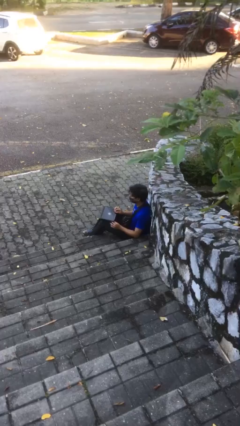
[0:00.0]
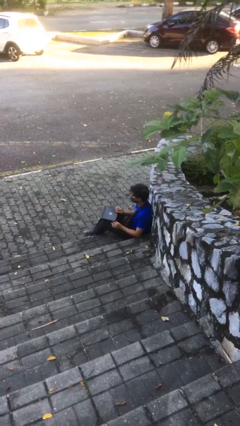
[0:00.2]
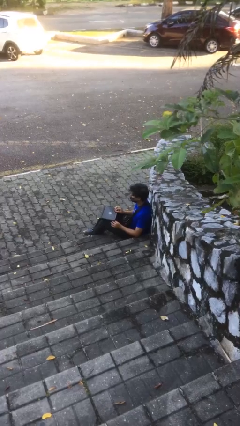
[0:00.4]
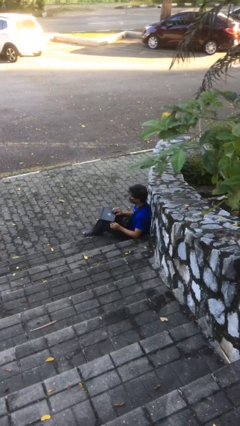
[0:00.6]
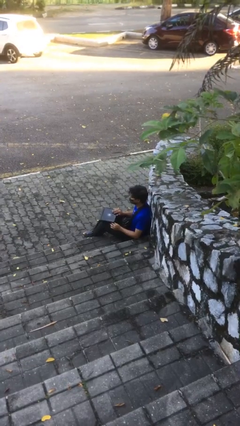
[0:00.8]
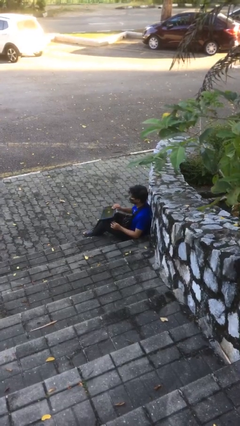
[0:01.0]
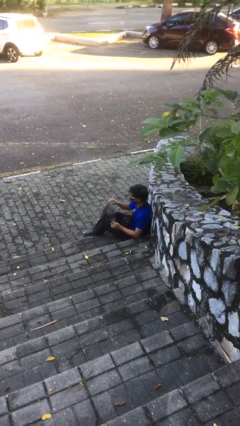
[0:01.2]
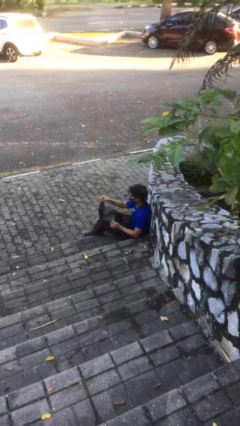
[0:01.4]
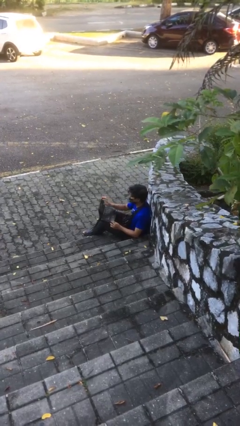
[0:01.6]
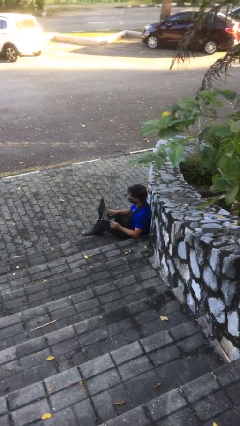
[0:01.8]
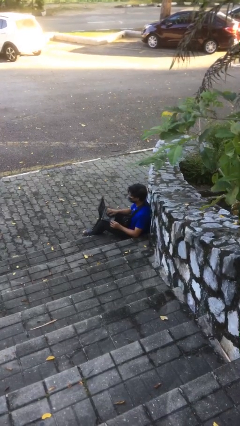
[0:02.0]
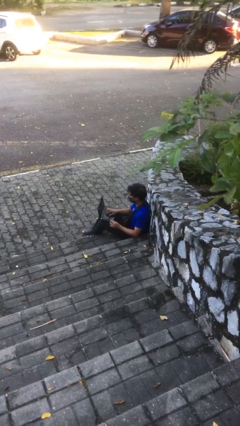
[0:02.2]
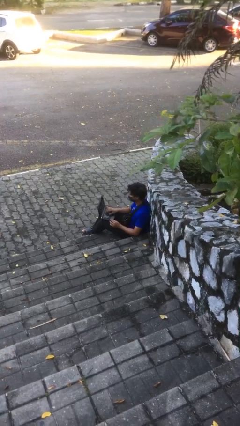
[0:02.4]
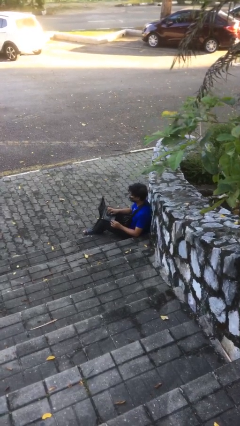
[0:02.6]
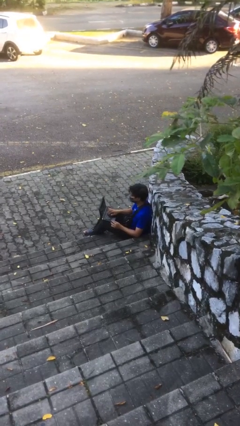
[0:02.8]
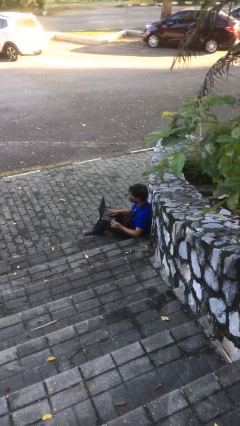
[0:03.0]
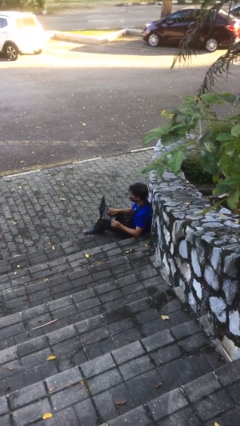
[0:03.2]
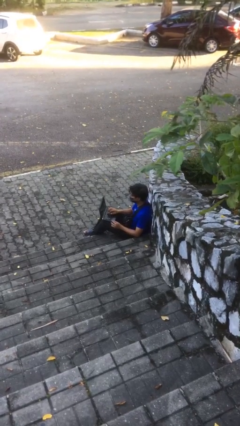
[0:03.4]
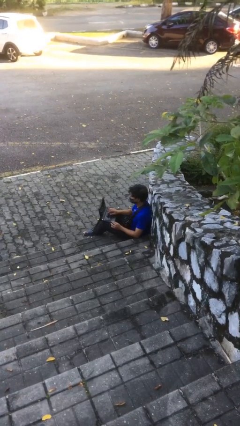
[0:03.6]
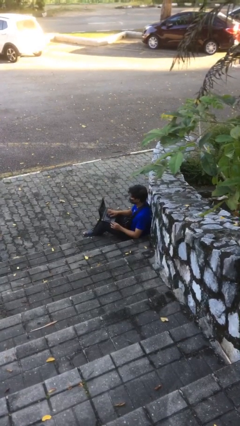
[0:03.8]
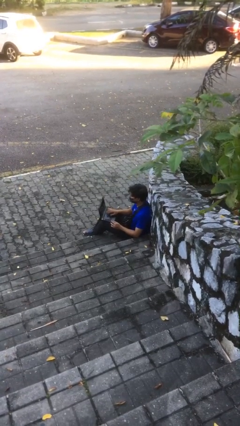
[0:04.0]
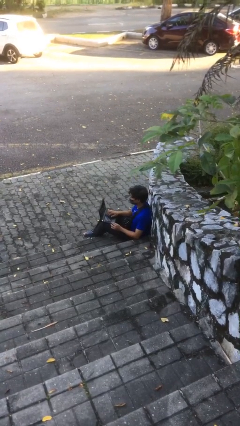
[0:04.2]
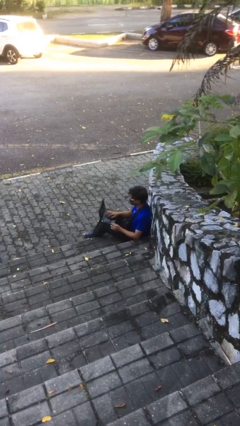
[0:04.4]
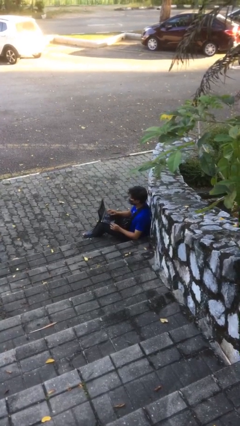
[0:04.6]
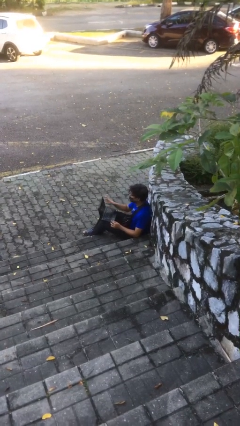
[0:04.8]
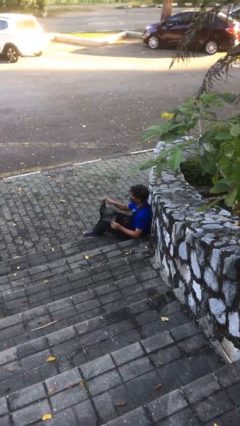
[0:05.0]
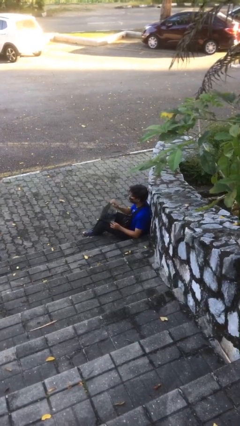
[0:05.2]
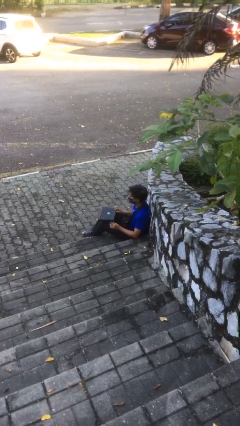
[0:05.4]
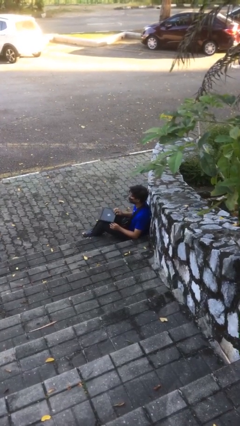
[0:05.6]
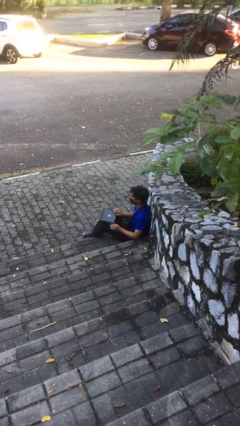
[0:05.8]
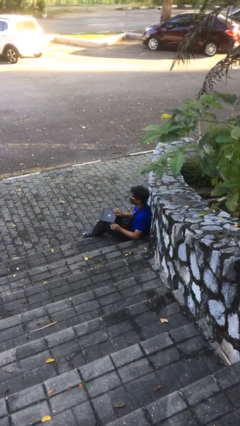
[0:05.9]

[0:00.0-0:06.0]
person interacts with laptop

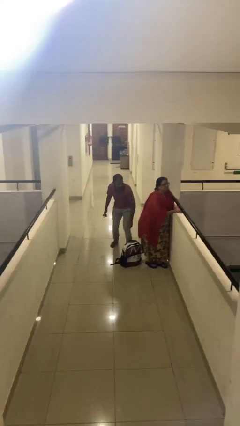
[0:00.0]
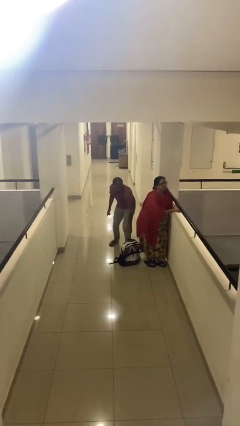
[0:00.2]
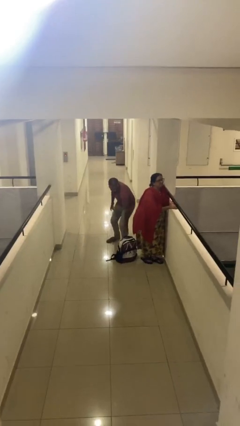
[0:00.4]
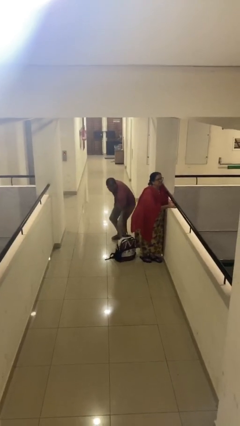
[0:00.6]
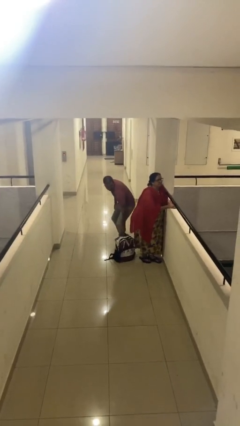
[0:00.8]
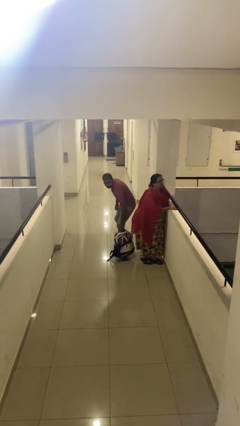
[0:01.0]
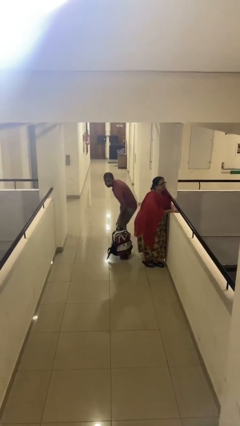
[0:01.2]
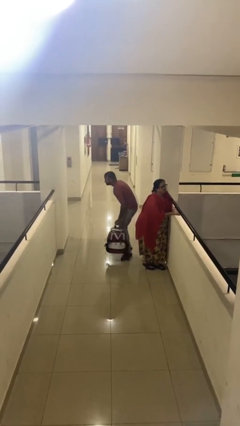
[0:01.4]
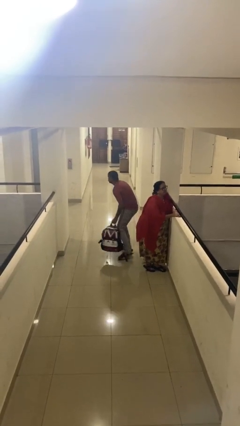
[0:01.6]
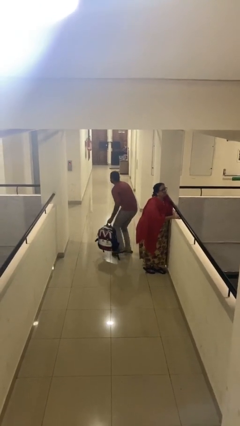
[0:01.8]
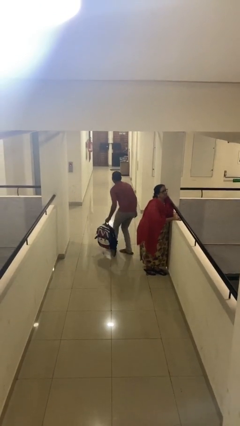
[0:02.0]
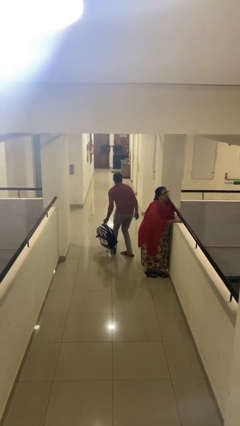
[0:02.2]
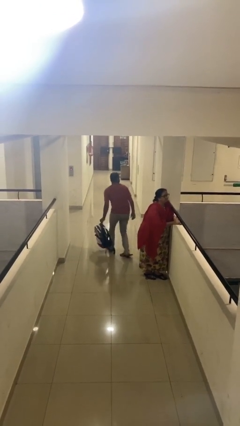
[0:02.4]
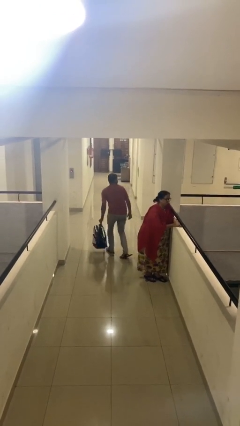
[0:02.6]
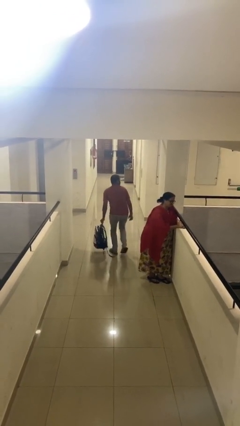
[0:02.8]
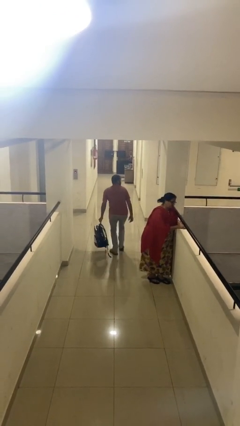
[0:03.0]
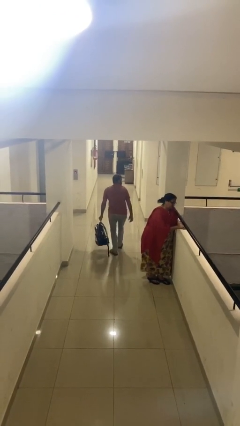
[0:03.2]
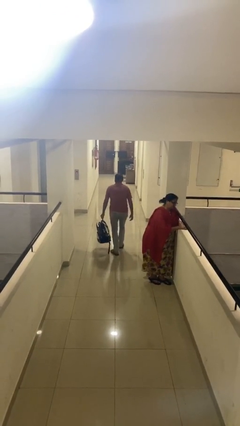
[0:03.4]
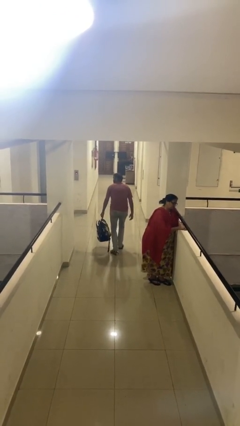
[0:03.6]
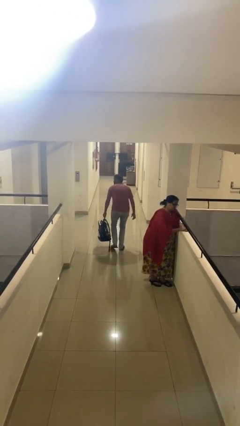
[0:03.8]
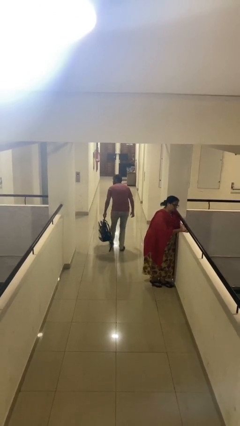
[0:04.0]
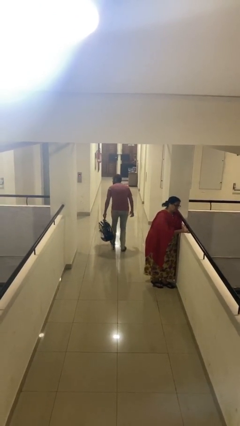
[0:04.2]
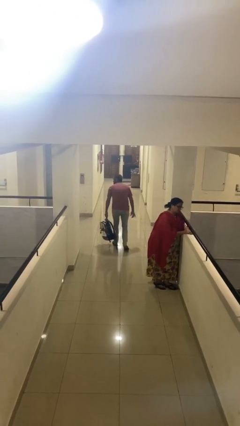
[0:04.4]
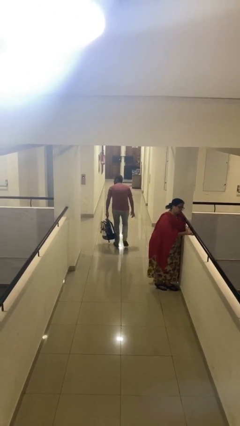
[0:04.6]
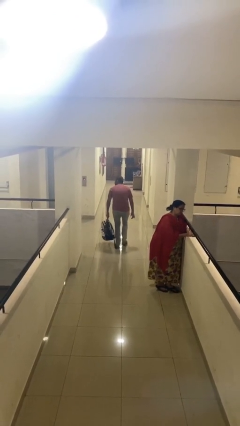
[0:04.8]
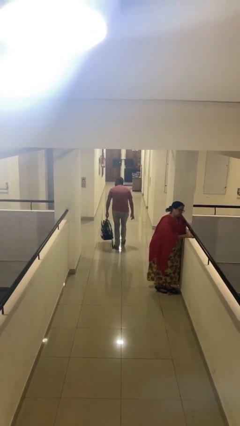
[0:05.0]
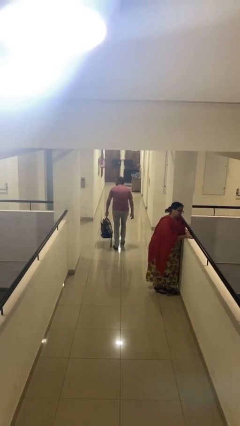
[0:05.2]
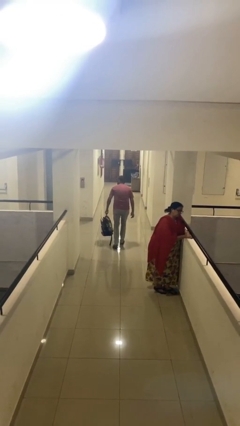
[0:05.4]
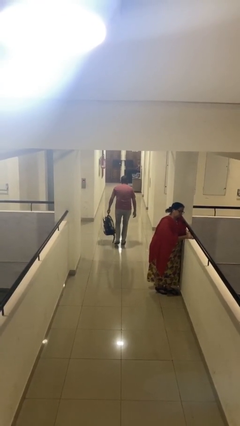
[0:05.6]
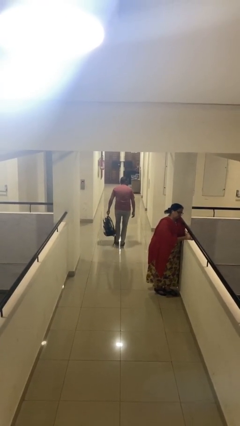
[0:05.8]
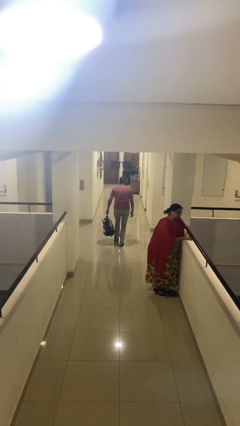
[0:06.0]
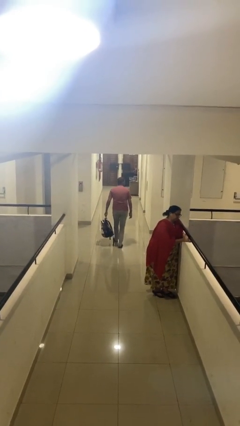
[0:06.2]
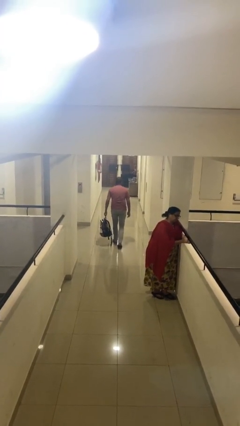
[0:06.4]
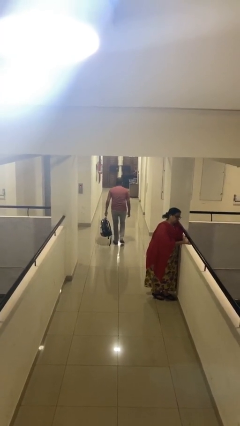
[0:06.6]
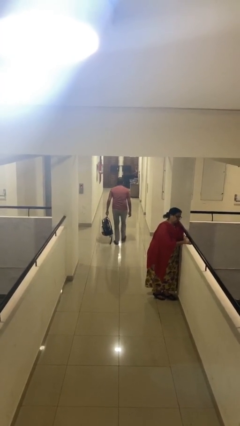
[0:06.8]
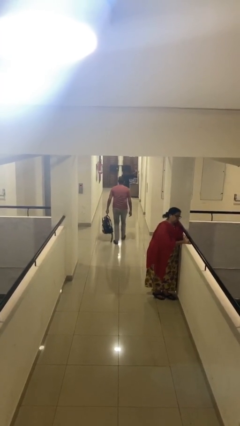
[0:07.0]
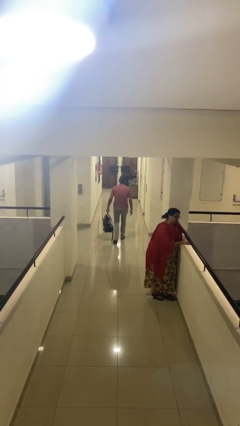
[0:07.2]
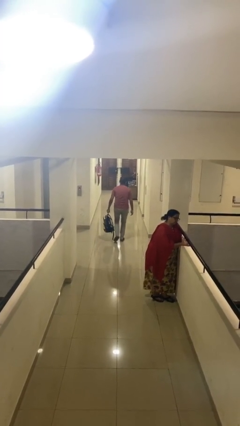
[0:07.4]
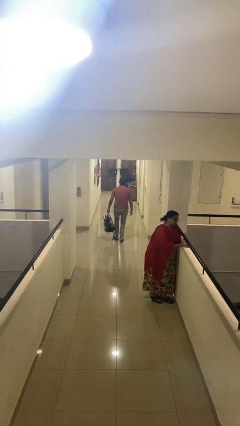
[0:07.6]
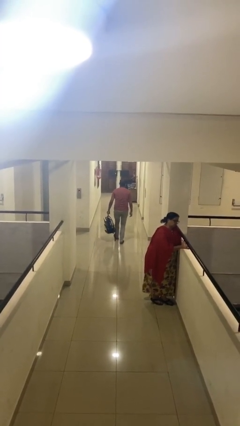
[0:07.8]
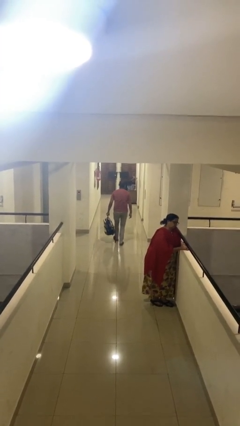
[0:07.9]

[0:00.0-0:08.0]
person steals object from person

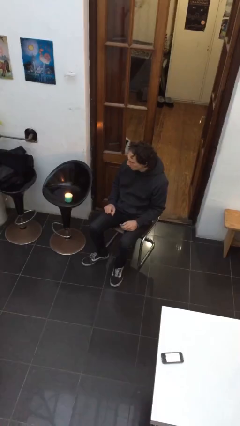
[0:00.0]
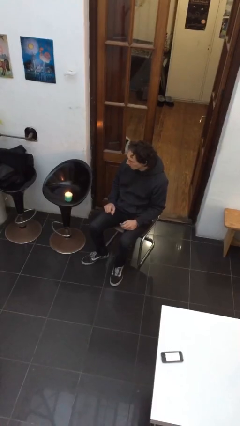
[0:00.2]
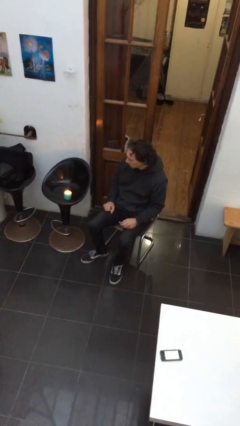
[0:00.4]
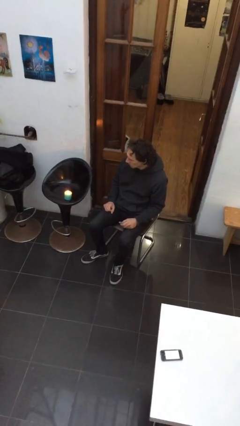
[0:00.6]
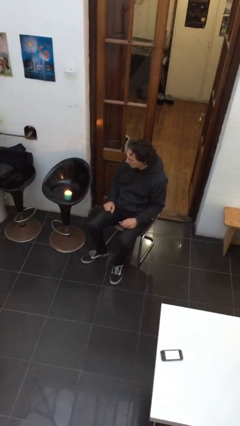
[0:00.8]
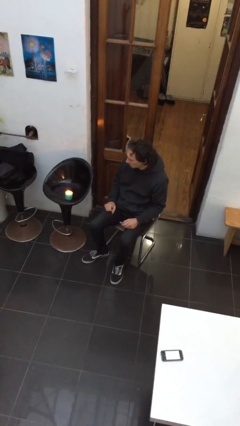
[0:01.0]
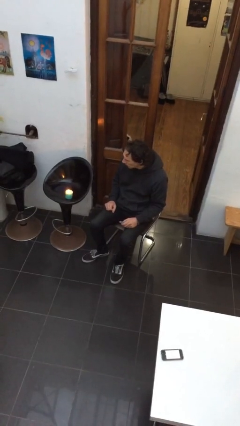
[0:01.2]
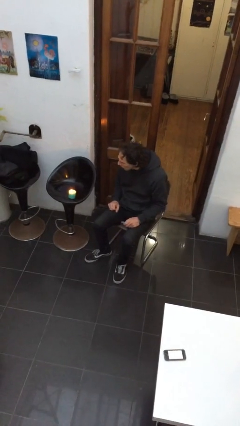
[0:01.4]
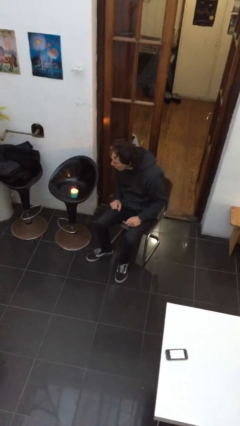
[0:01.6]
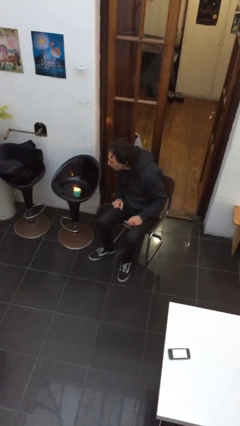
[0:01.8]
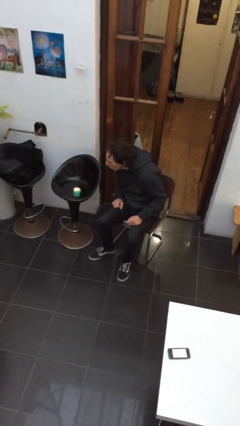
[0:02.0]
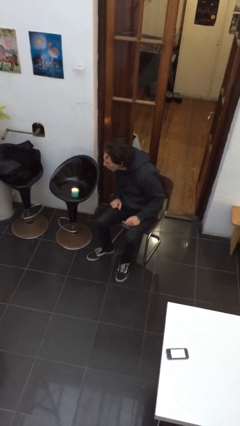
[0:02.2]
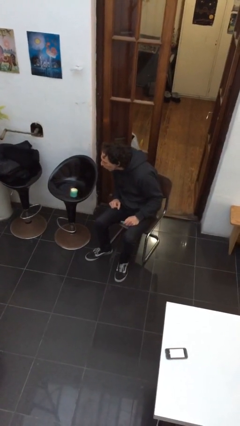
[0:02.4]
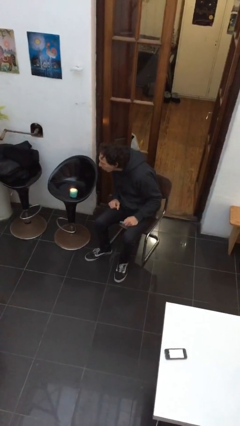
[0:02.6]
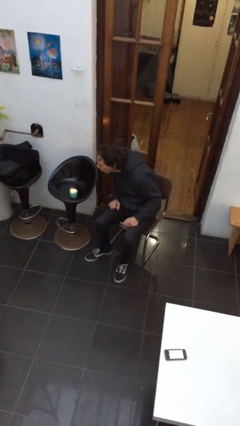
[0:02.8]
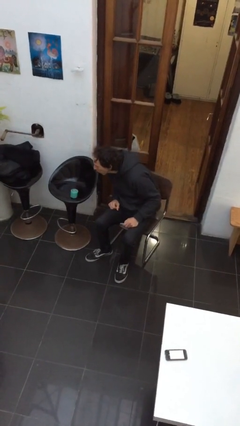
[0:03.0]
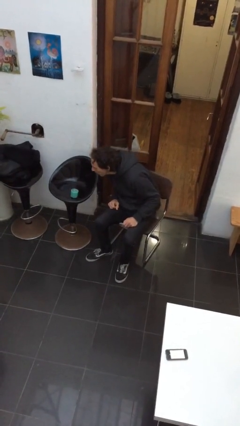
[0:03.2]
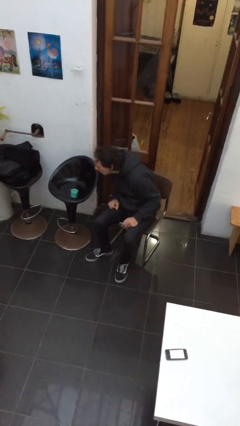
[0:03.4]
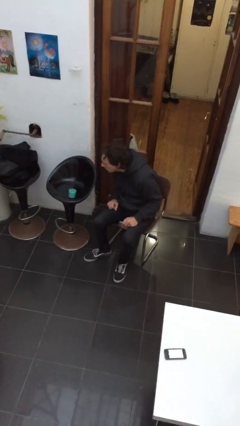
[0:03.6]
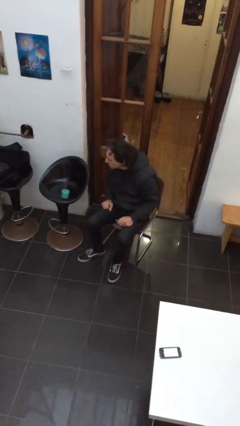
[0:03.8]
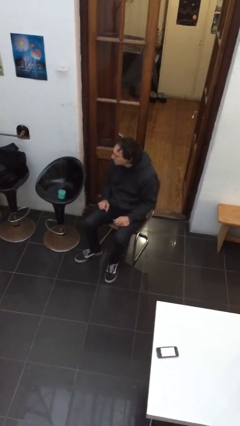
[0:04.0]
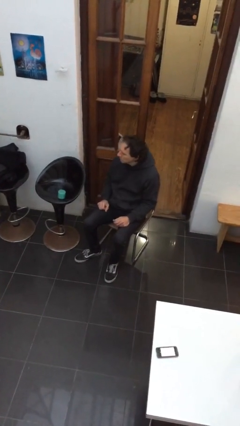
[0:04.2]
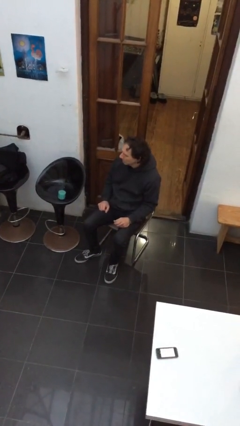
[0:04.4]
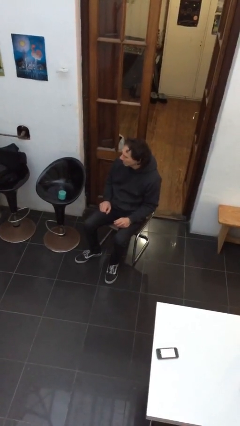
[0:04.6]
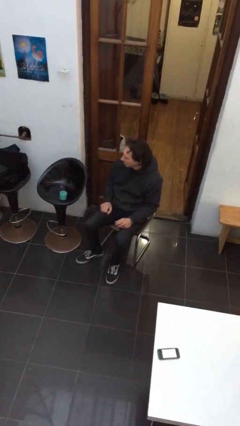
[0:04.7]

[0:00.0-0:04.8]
person extinguishes candle
